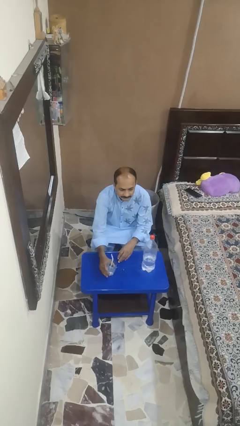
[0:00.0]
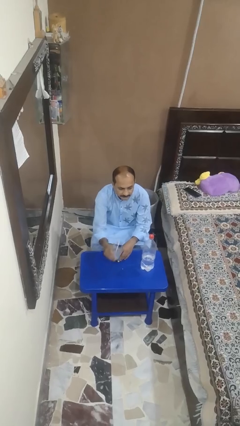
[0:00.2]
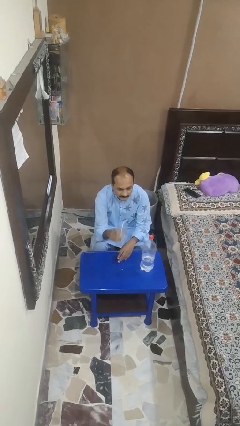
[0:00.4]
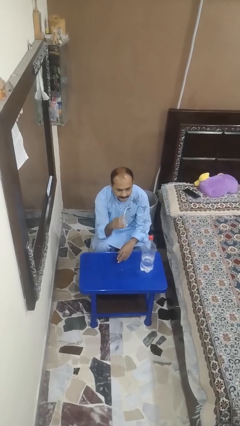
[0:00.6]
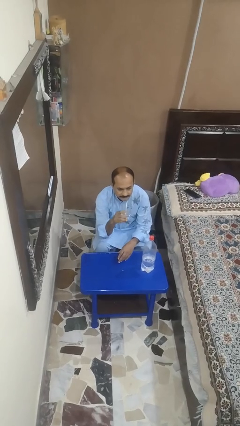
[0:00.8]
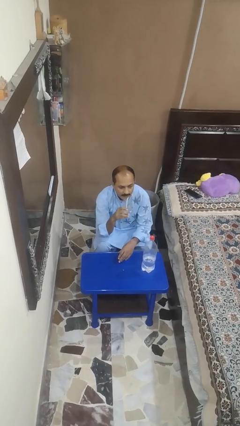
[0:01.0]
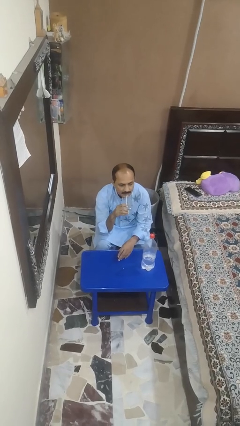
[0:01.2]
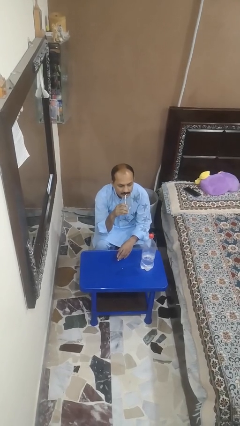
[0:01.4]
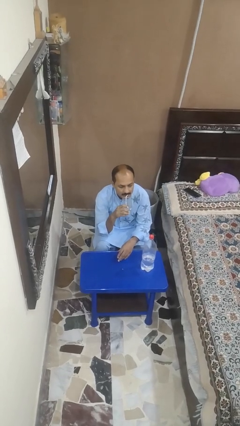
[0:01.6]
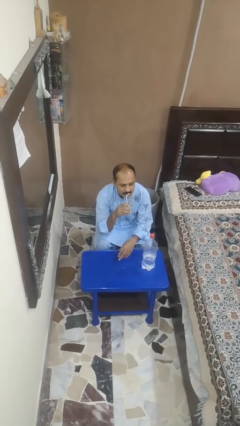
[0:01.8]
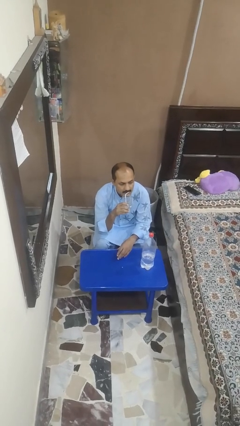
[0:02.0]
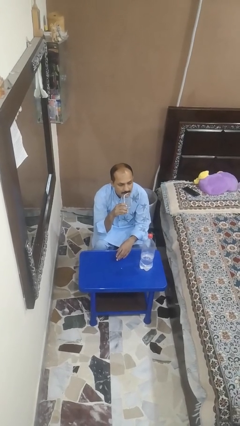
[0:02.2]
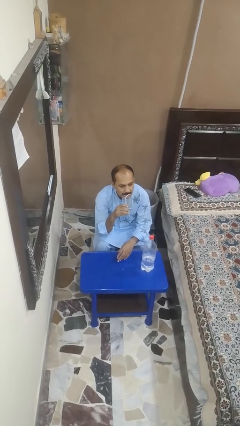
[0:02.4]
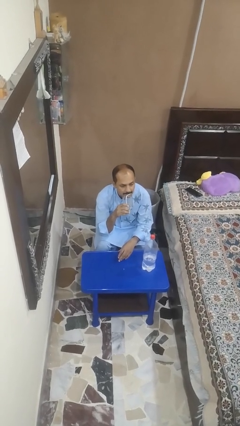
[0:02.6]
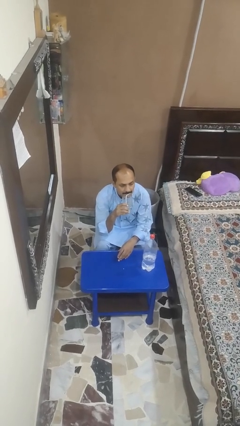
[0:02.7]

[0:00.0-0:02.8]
person drinks from straw

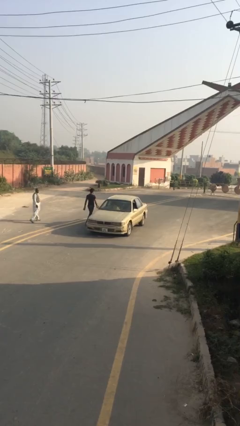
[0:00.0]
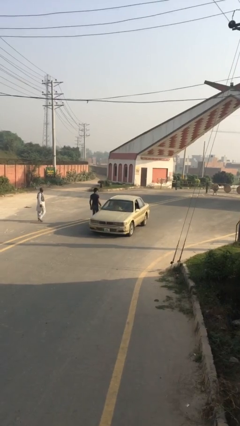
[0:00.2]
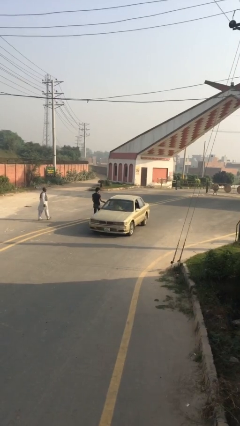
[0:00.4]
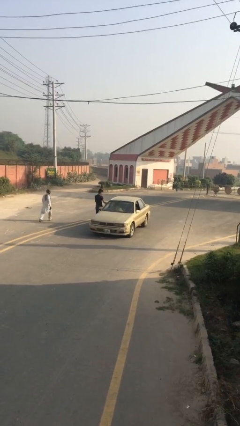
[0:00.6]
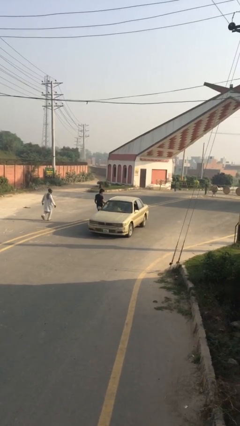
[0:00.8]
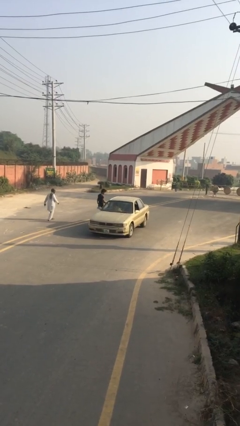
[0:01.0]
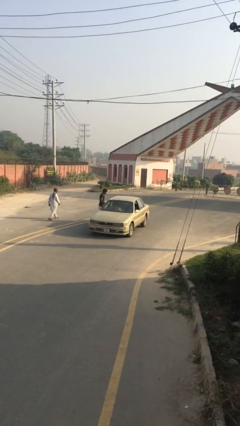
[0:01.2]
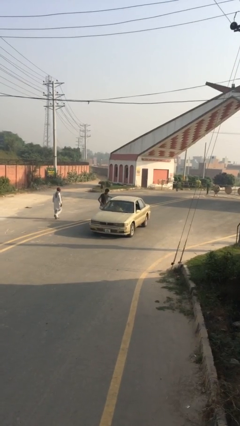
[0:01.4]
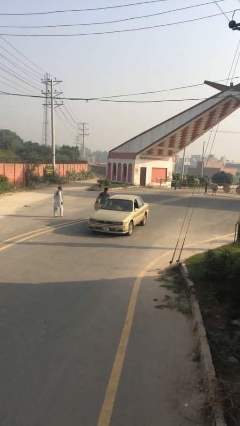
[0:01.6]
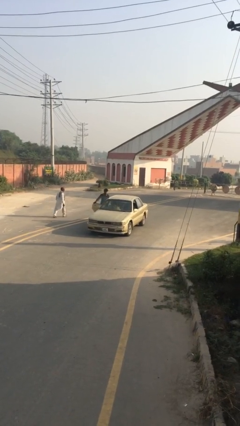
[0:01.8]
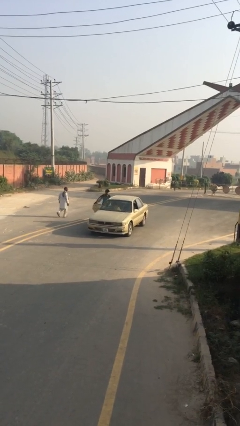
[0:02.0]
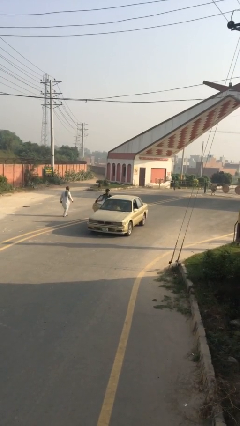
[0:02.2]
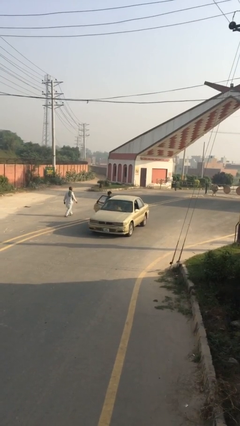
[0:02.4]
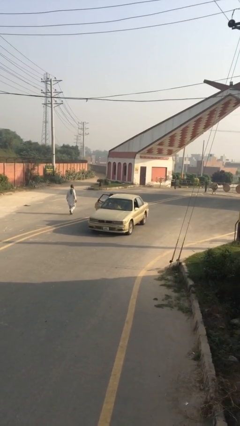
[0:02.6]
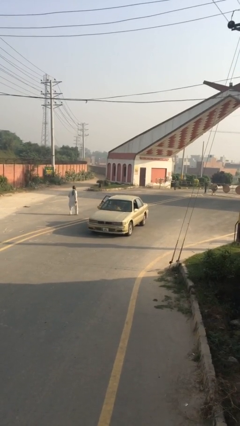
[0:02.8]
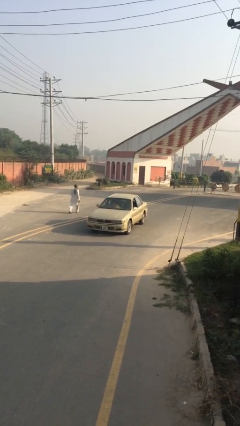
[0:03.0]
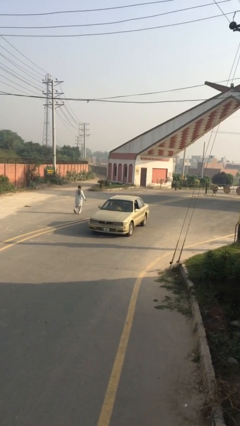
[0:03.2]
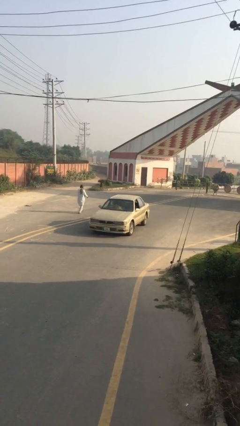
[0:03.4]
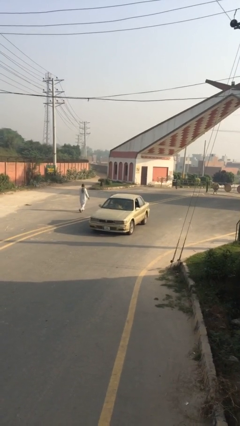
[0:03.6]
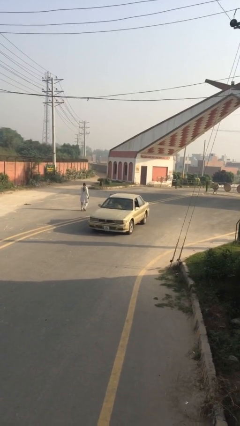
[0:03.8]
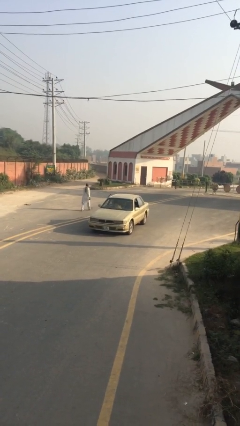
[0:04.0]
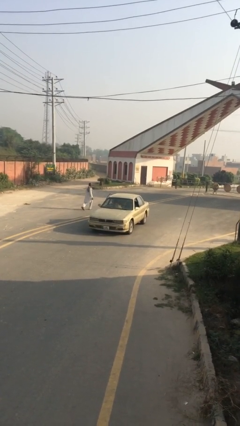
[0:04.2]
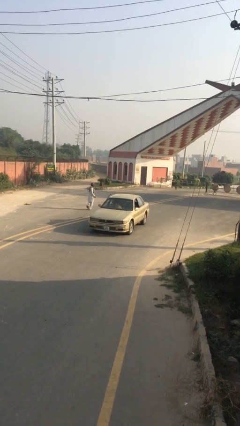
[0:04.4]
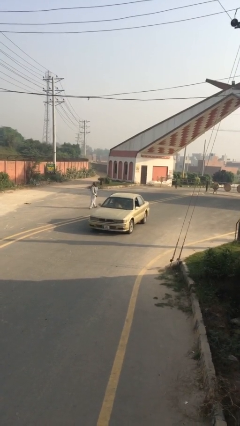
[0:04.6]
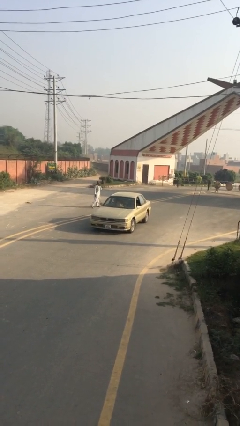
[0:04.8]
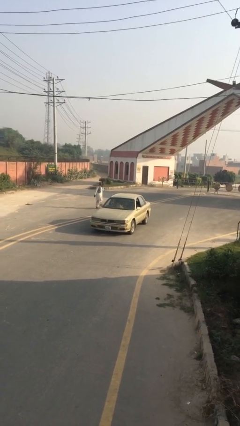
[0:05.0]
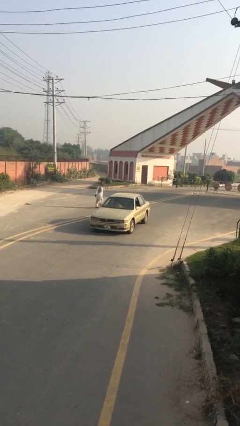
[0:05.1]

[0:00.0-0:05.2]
car picks up person

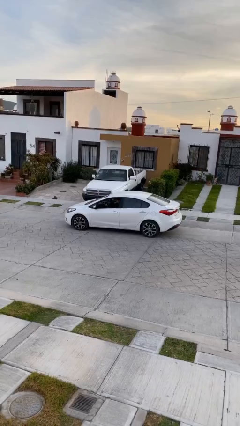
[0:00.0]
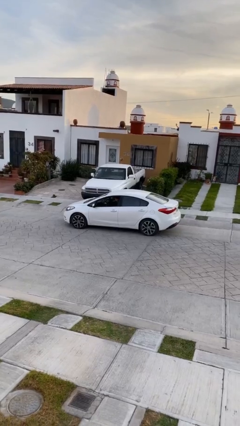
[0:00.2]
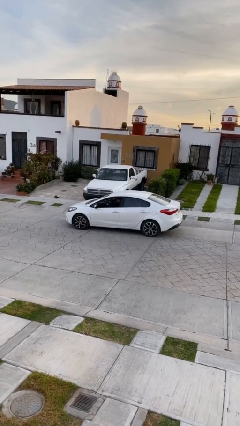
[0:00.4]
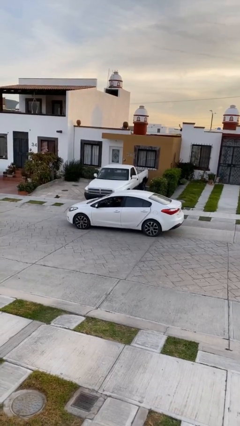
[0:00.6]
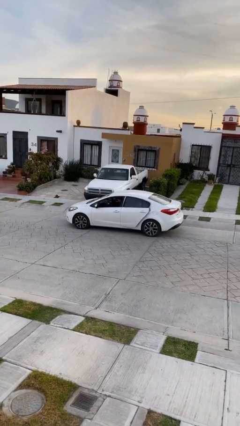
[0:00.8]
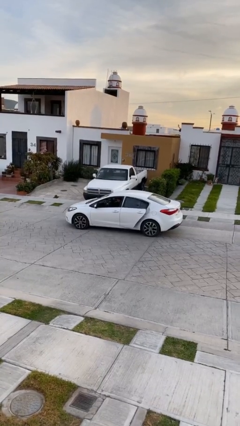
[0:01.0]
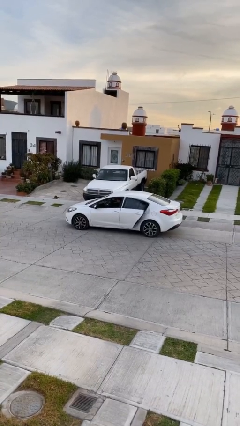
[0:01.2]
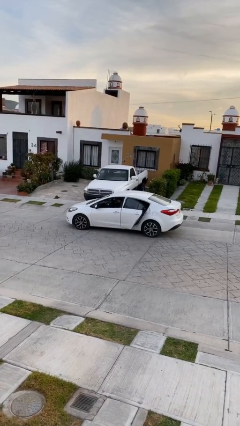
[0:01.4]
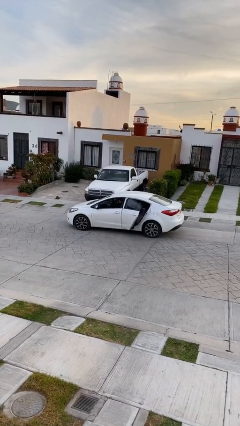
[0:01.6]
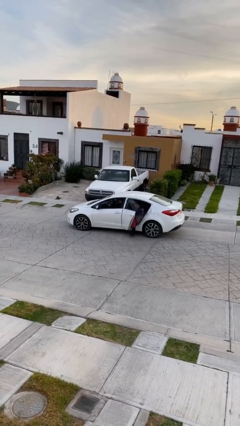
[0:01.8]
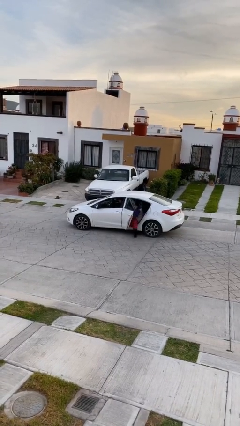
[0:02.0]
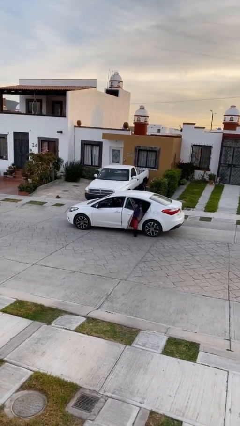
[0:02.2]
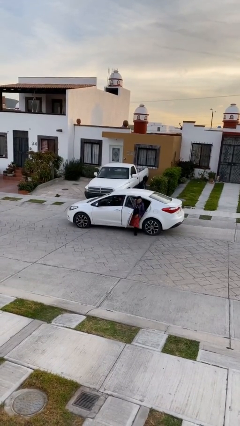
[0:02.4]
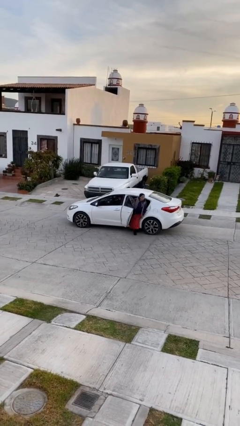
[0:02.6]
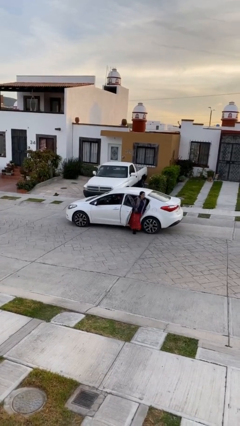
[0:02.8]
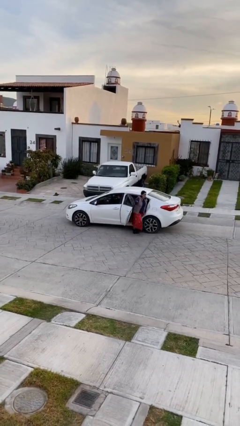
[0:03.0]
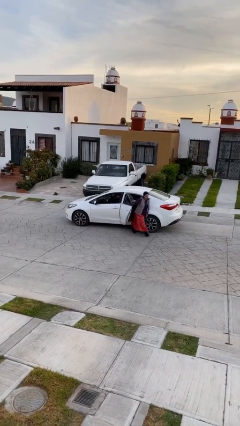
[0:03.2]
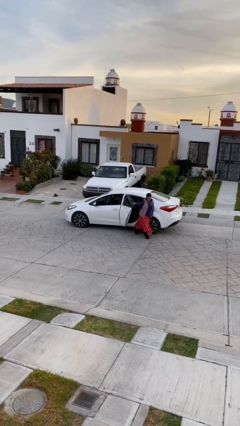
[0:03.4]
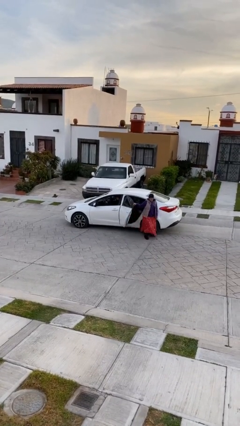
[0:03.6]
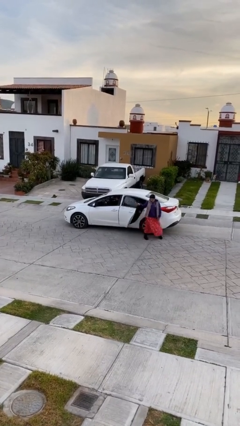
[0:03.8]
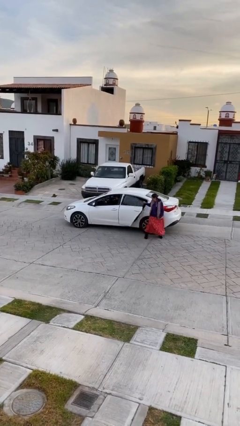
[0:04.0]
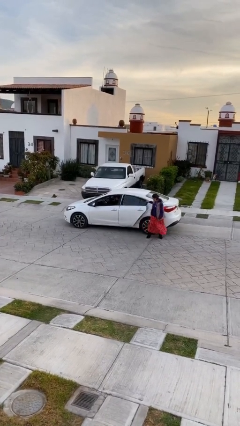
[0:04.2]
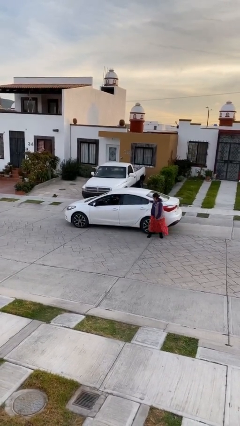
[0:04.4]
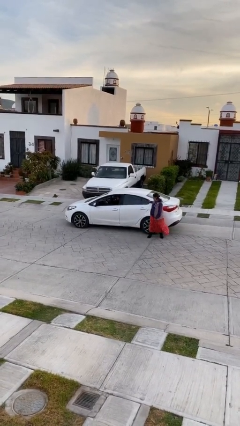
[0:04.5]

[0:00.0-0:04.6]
car drops off person

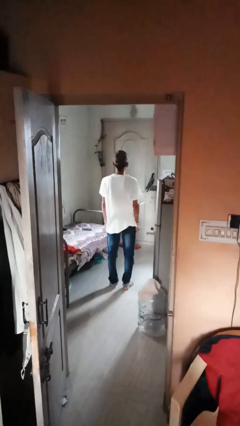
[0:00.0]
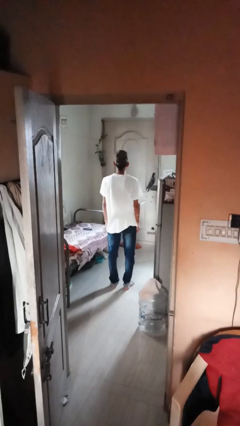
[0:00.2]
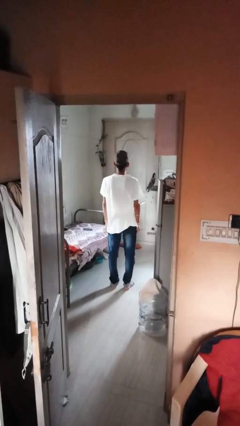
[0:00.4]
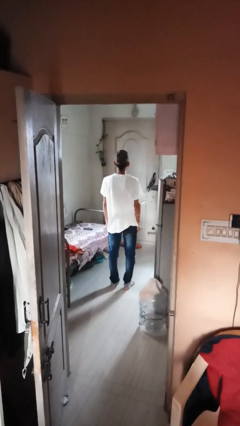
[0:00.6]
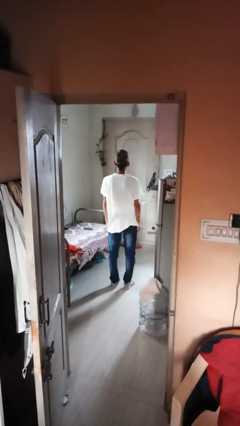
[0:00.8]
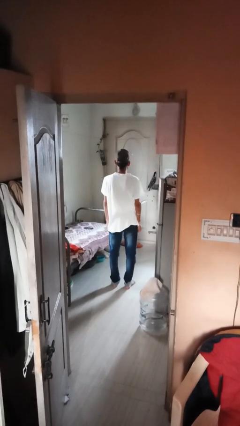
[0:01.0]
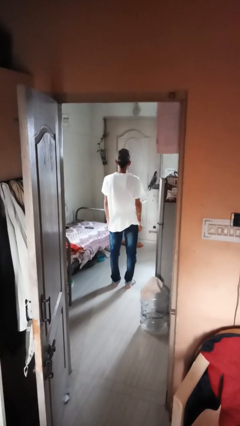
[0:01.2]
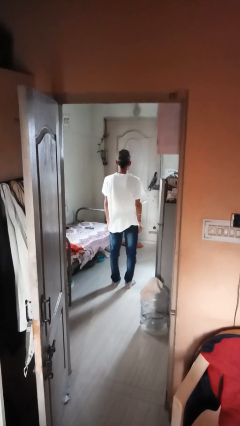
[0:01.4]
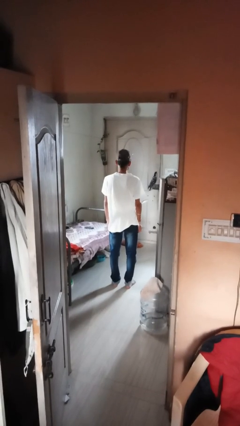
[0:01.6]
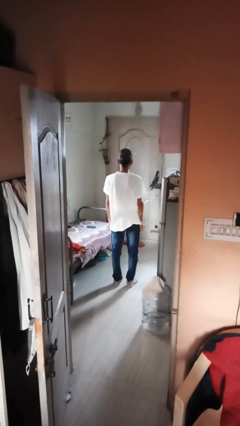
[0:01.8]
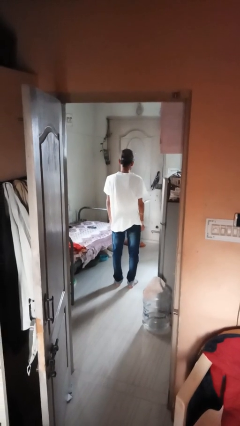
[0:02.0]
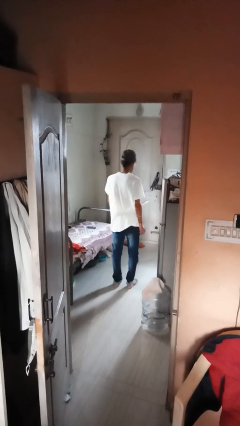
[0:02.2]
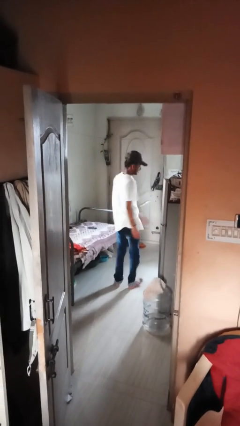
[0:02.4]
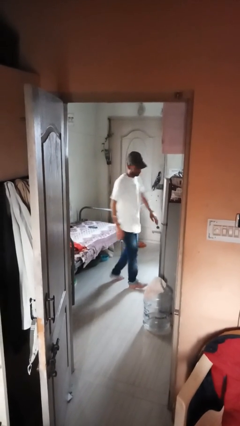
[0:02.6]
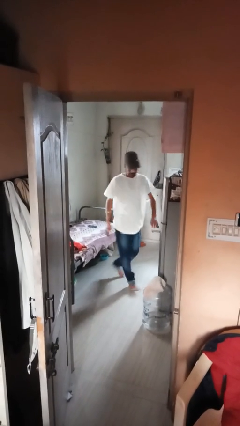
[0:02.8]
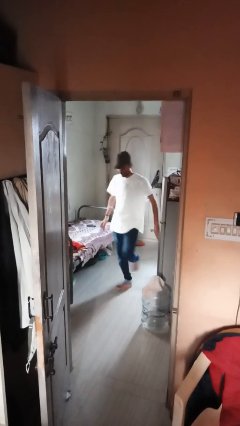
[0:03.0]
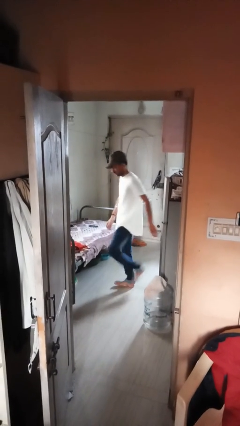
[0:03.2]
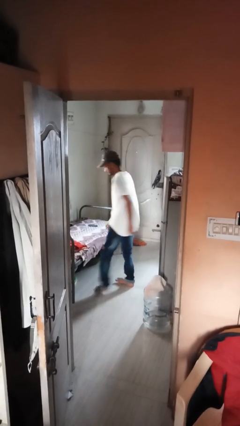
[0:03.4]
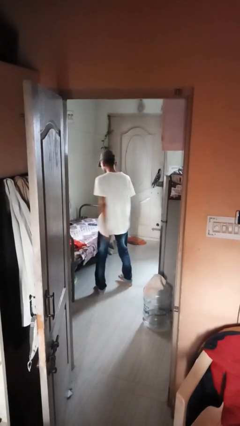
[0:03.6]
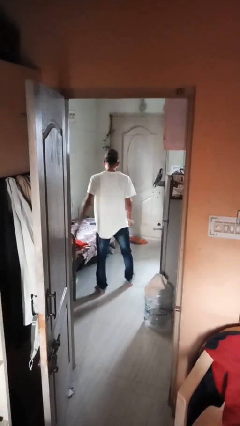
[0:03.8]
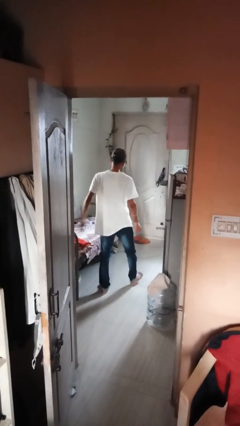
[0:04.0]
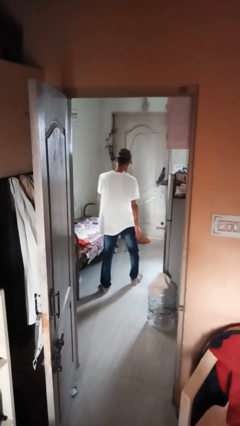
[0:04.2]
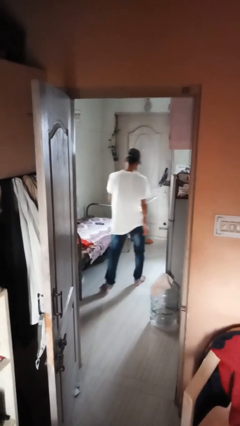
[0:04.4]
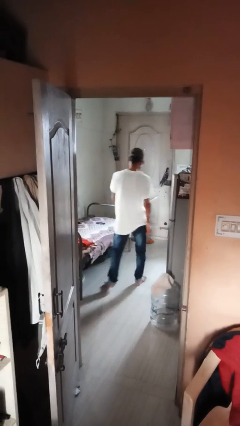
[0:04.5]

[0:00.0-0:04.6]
person twirls

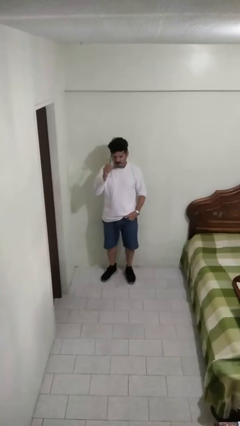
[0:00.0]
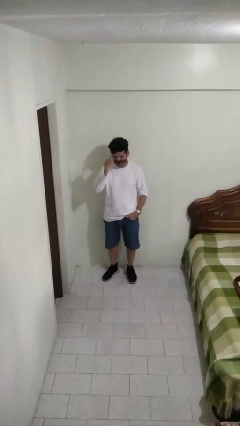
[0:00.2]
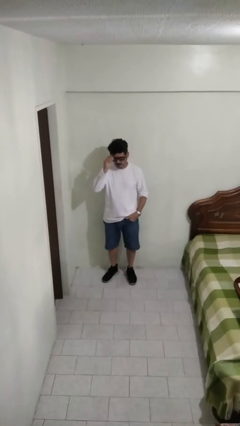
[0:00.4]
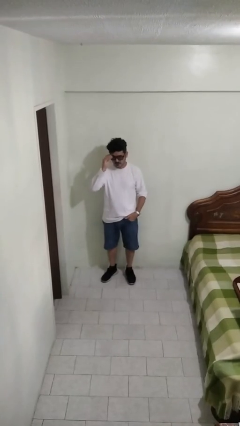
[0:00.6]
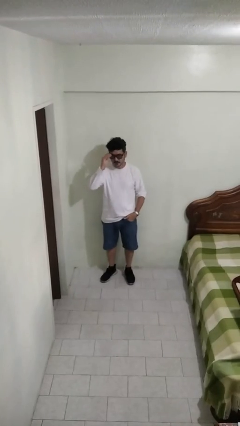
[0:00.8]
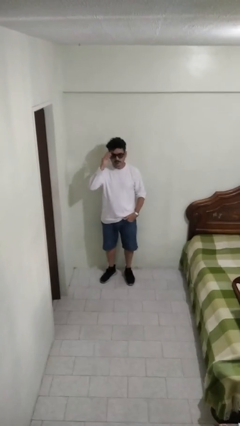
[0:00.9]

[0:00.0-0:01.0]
person puts on sunglasses
